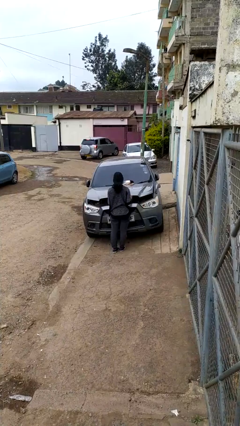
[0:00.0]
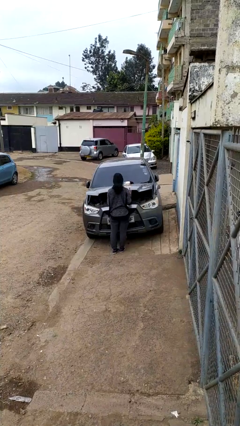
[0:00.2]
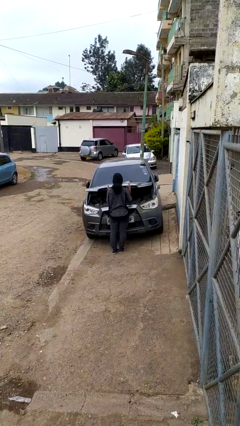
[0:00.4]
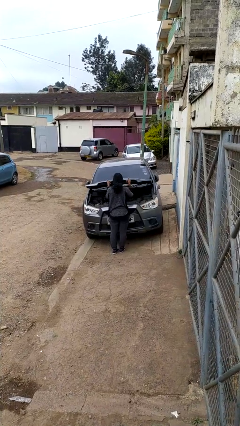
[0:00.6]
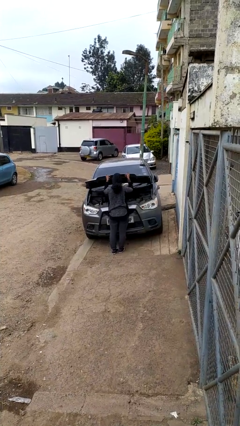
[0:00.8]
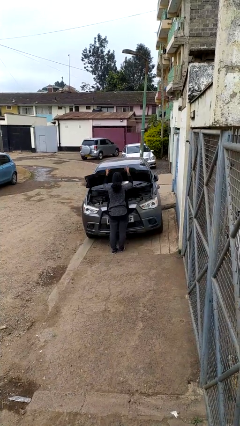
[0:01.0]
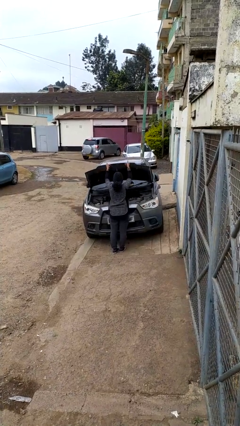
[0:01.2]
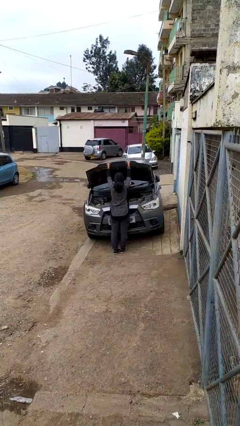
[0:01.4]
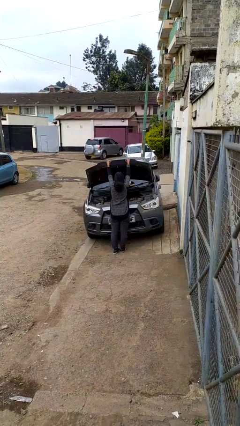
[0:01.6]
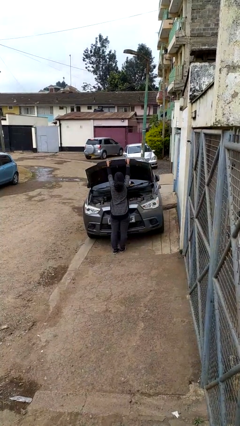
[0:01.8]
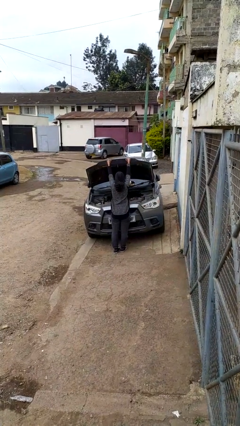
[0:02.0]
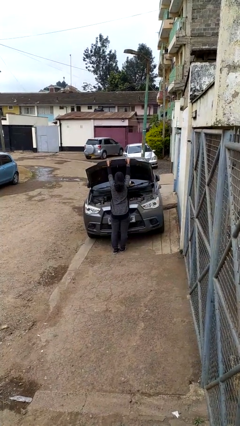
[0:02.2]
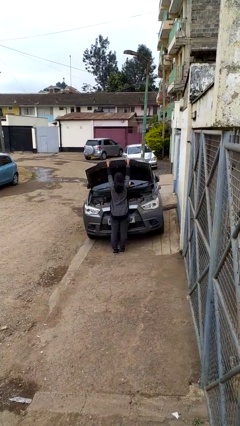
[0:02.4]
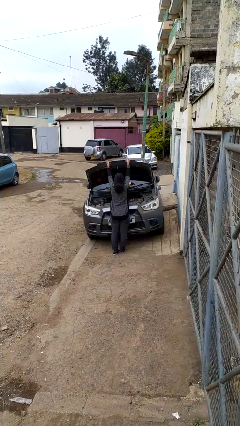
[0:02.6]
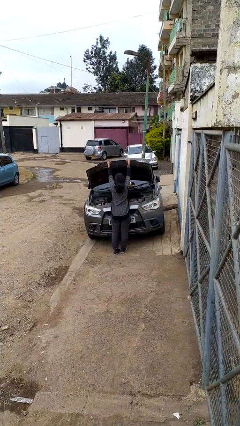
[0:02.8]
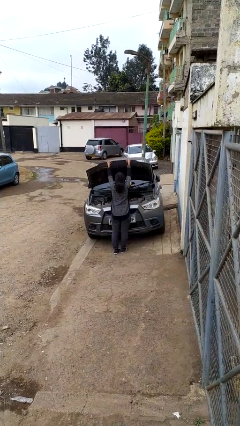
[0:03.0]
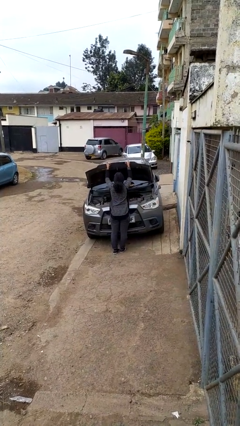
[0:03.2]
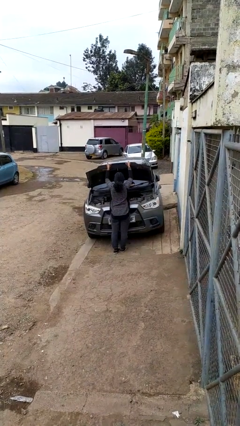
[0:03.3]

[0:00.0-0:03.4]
person opens car hood

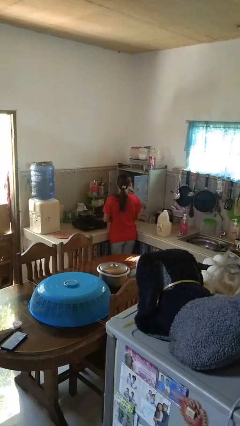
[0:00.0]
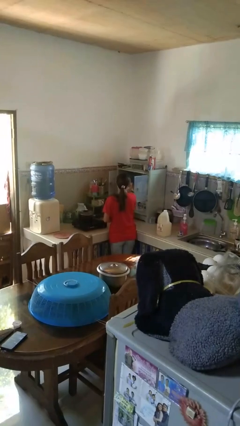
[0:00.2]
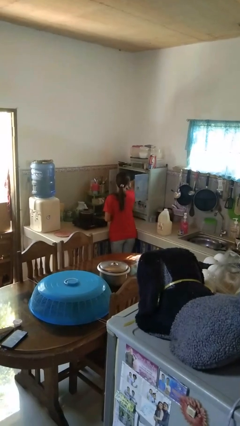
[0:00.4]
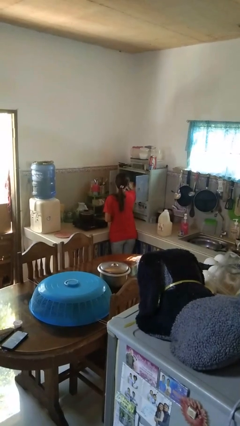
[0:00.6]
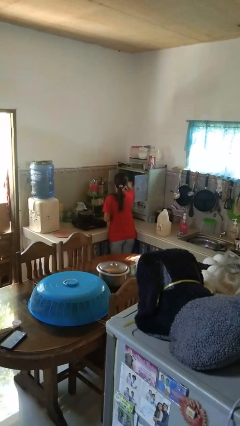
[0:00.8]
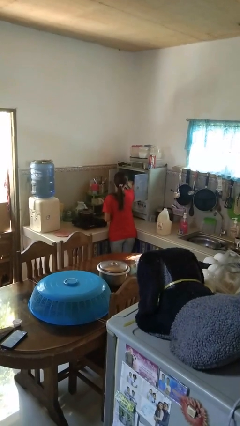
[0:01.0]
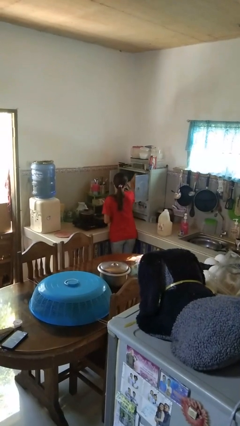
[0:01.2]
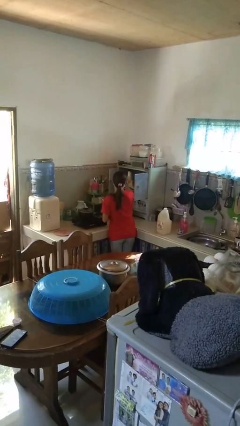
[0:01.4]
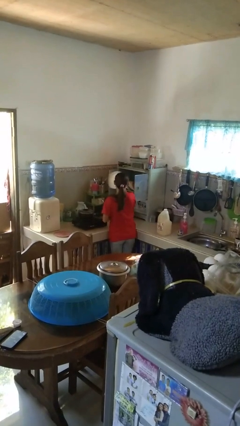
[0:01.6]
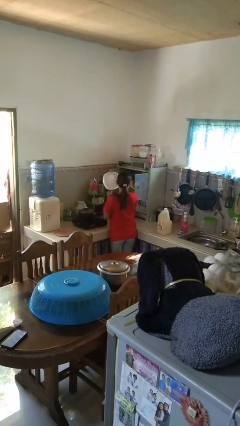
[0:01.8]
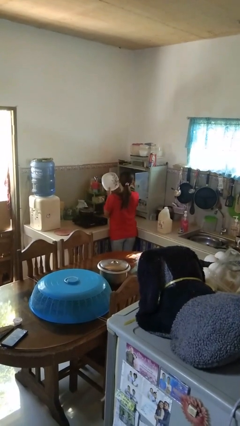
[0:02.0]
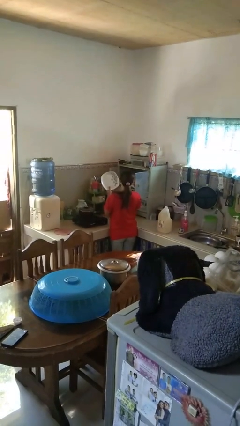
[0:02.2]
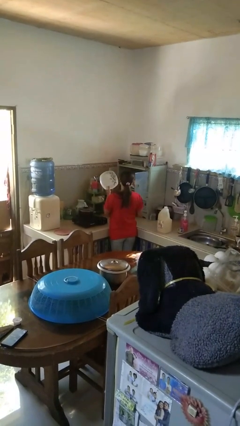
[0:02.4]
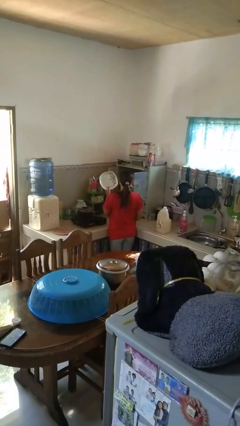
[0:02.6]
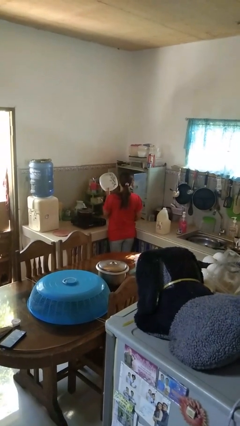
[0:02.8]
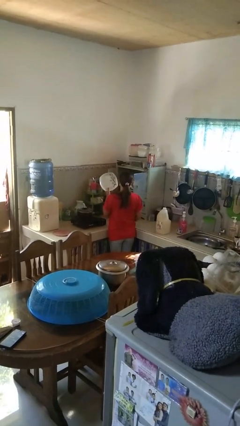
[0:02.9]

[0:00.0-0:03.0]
person takes object from cabinet

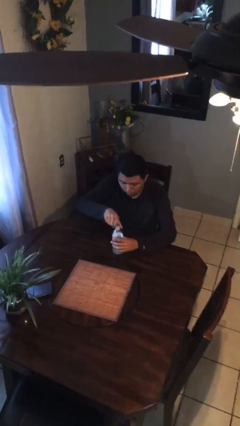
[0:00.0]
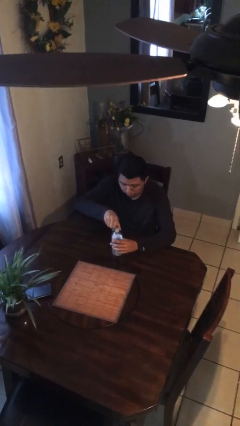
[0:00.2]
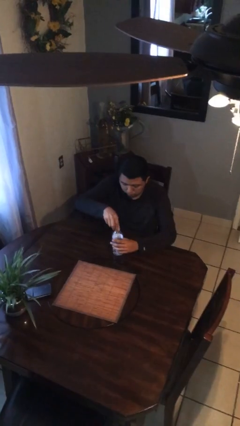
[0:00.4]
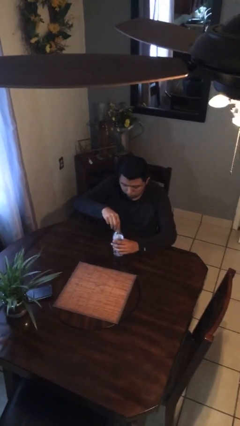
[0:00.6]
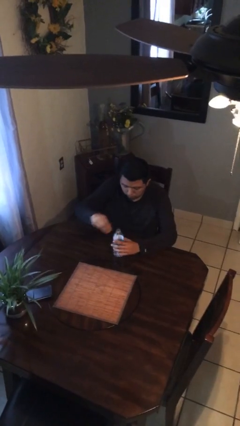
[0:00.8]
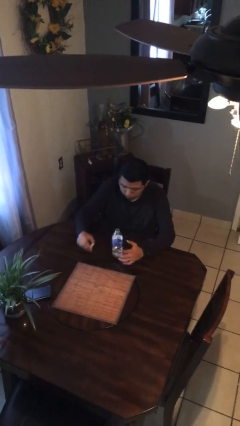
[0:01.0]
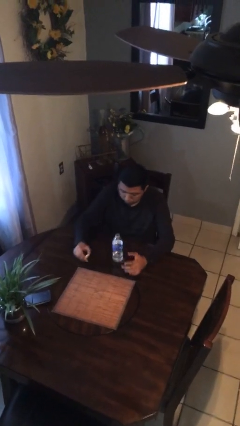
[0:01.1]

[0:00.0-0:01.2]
person unscrews lid from bottle

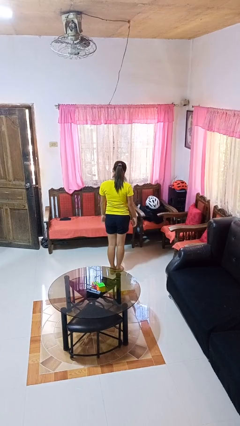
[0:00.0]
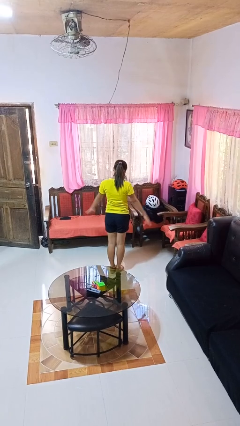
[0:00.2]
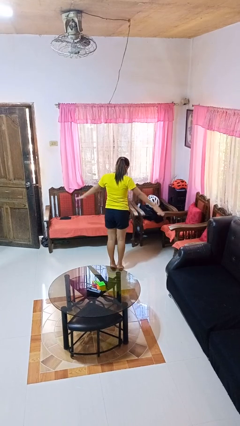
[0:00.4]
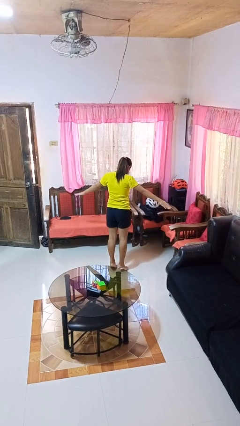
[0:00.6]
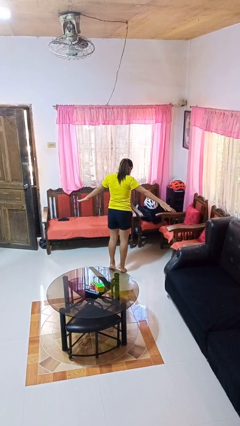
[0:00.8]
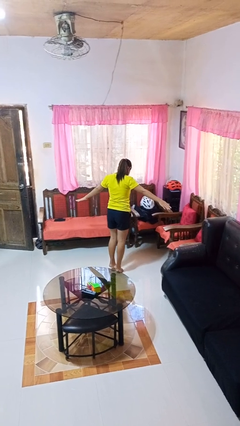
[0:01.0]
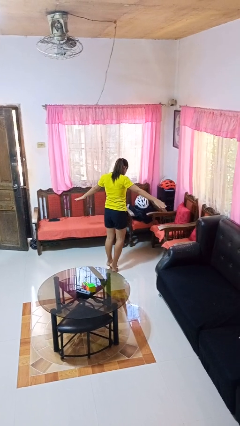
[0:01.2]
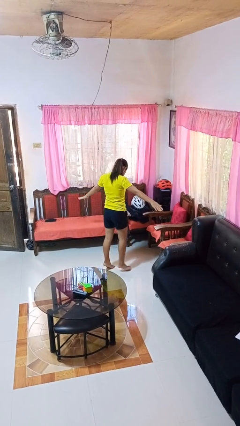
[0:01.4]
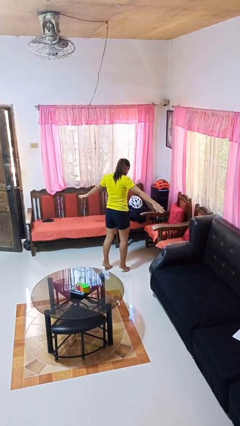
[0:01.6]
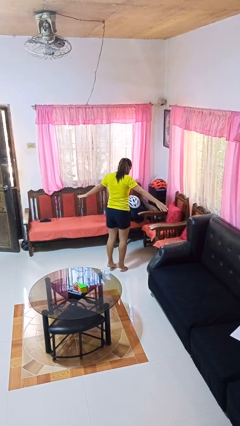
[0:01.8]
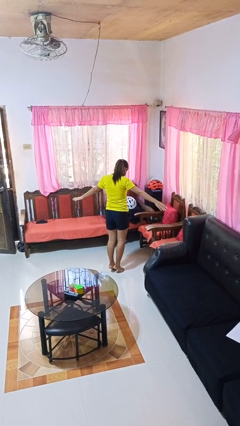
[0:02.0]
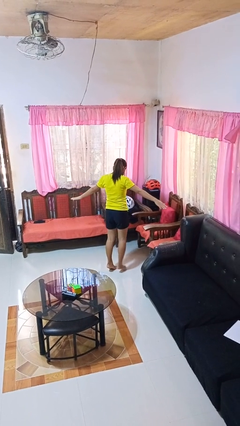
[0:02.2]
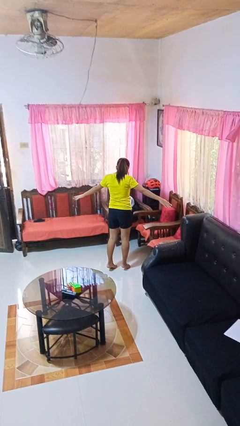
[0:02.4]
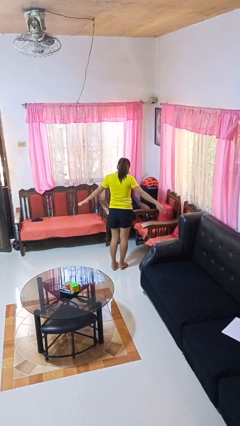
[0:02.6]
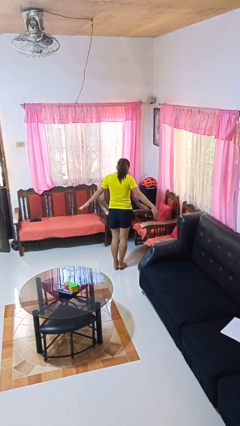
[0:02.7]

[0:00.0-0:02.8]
person walks tiptoe

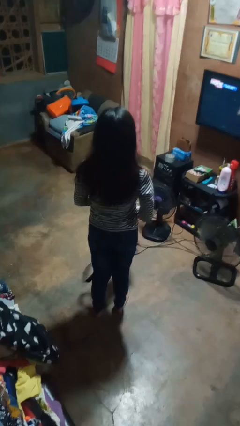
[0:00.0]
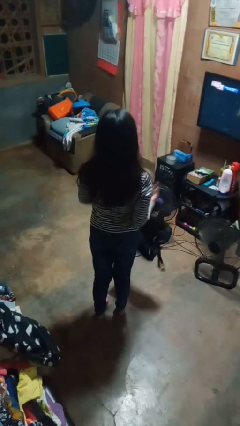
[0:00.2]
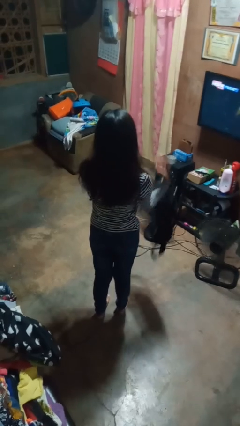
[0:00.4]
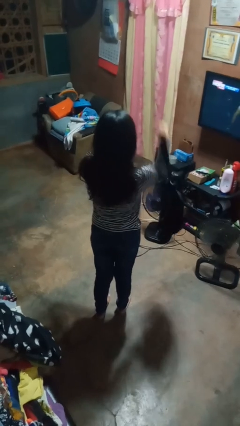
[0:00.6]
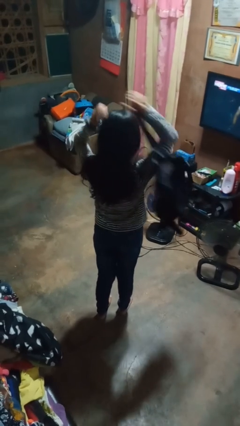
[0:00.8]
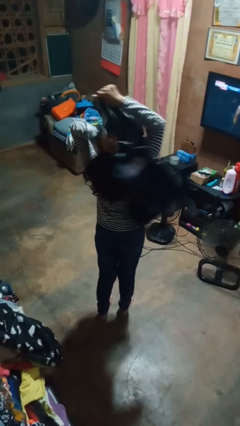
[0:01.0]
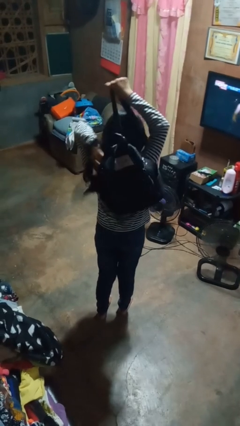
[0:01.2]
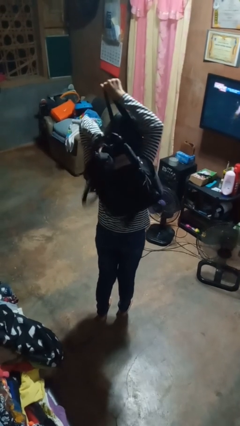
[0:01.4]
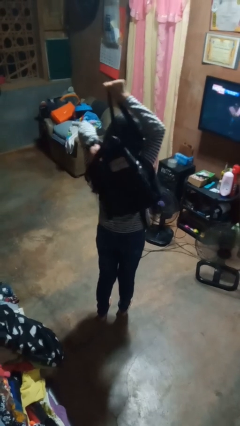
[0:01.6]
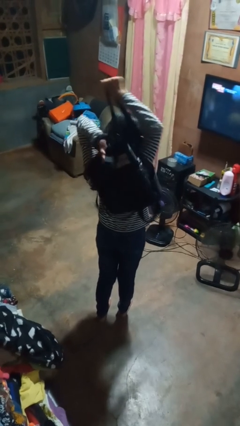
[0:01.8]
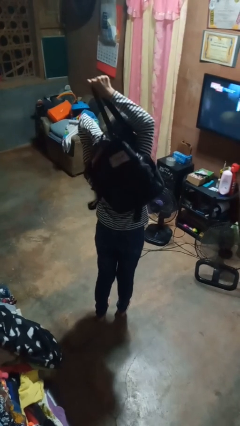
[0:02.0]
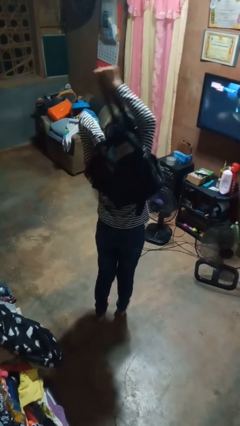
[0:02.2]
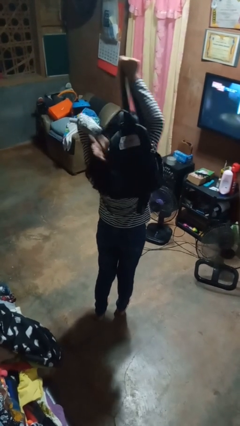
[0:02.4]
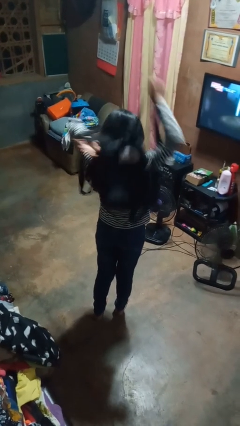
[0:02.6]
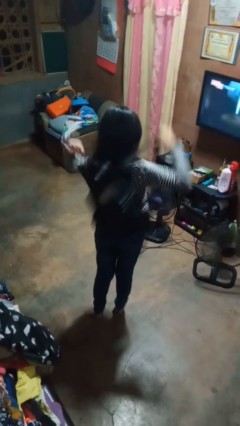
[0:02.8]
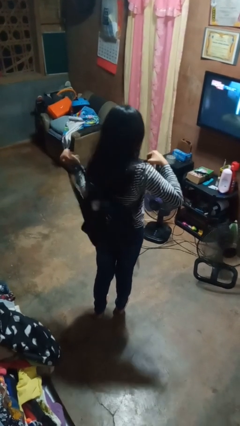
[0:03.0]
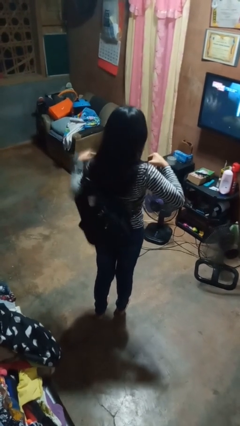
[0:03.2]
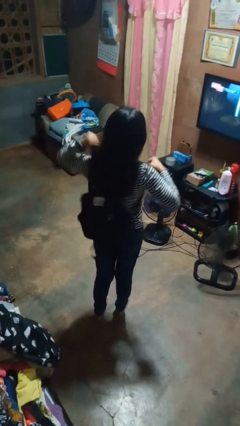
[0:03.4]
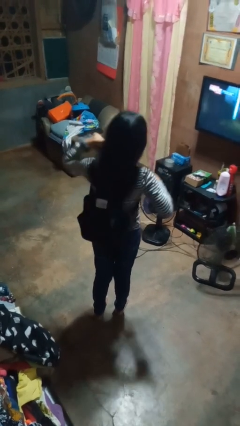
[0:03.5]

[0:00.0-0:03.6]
person puts on backpack

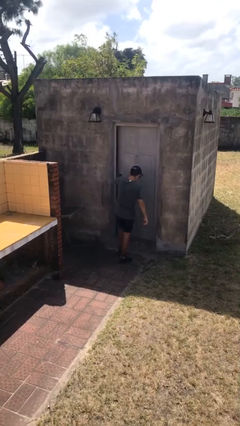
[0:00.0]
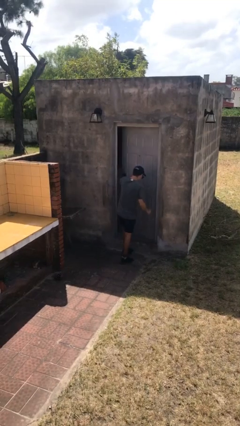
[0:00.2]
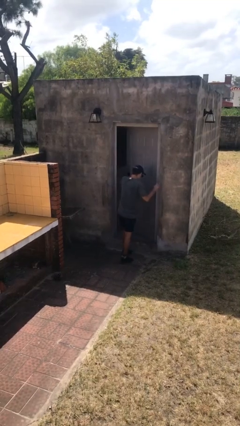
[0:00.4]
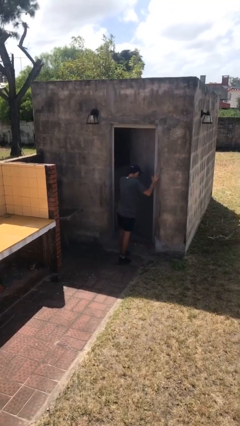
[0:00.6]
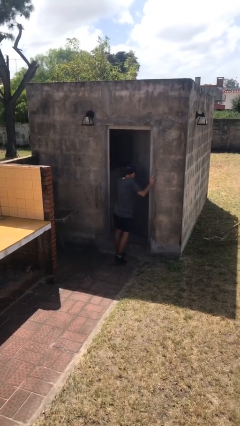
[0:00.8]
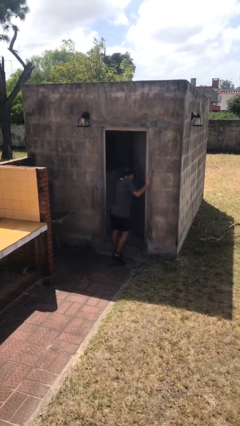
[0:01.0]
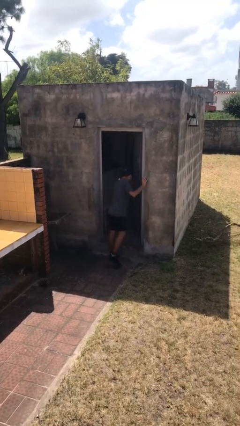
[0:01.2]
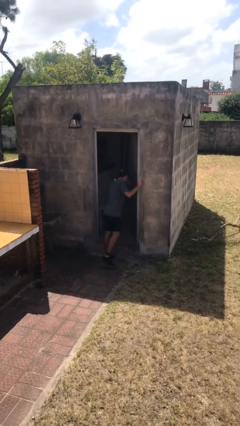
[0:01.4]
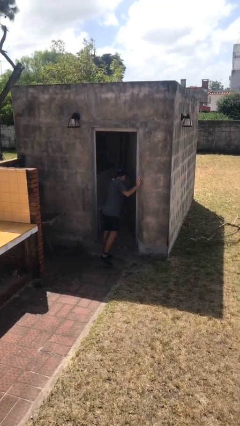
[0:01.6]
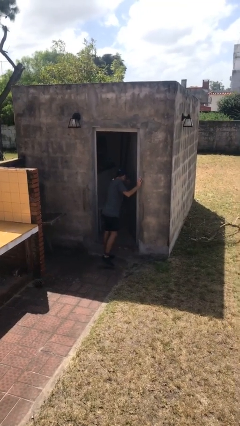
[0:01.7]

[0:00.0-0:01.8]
person opens facility door

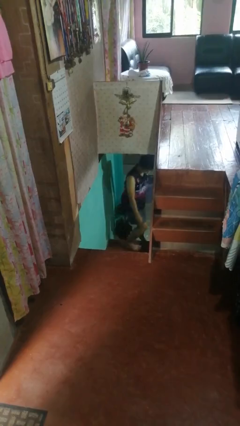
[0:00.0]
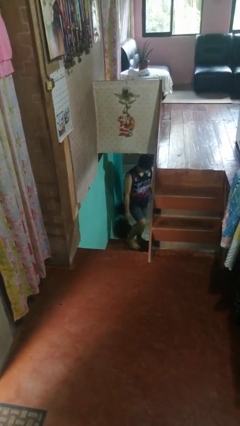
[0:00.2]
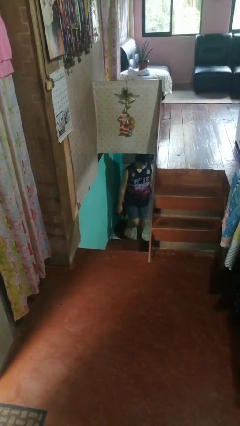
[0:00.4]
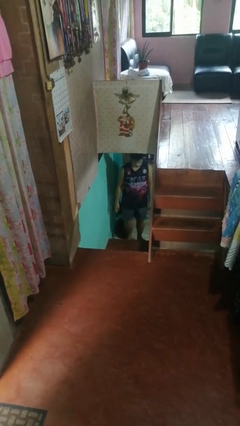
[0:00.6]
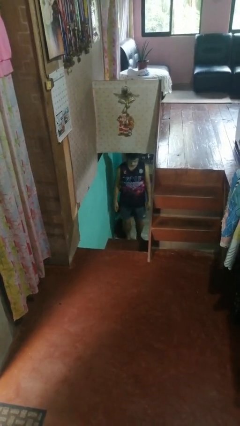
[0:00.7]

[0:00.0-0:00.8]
person climbs down stairs

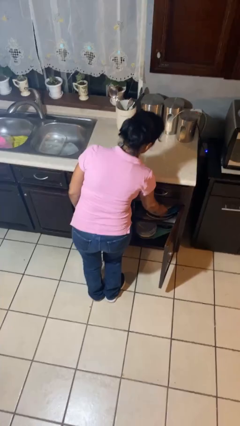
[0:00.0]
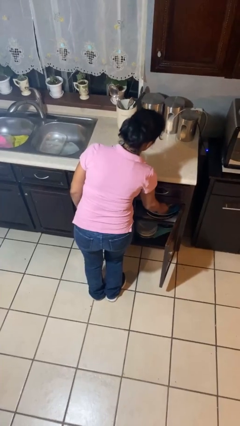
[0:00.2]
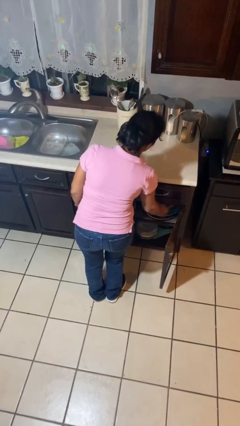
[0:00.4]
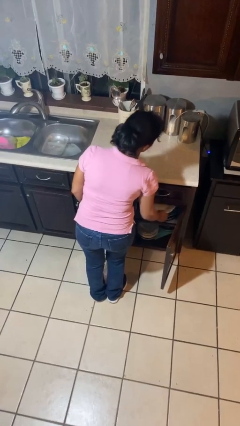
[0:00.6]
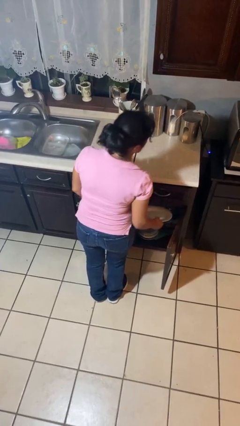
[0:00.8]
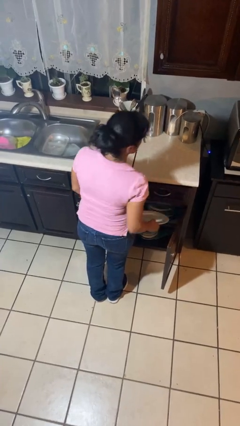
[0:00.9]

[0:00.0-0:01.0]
person puts object in cabinet
